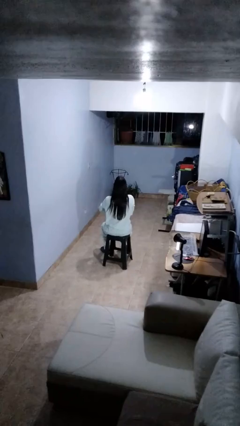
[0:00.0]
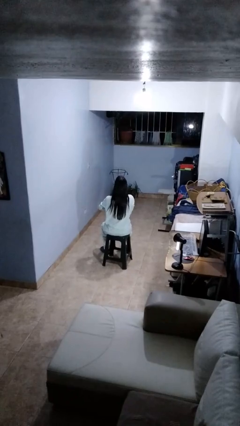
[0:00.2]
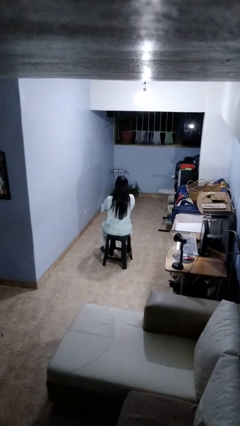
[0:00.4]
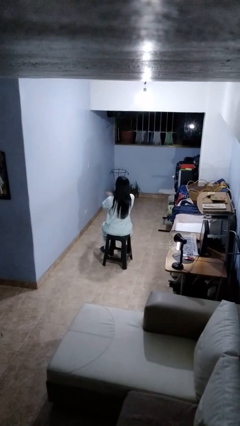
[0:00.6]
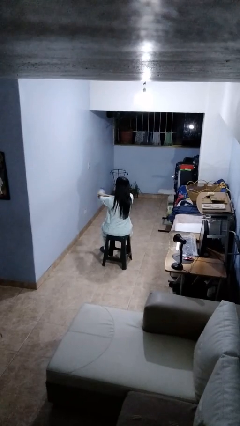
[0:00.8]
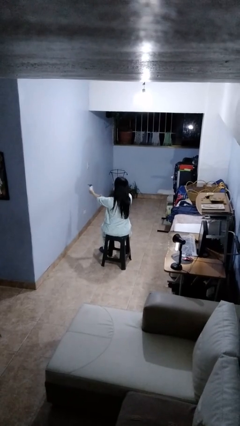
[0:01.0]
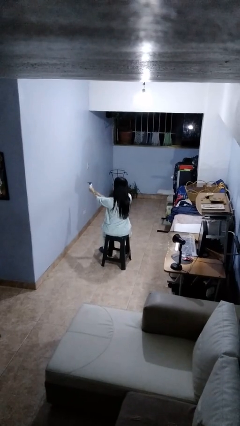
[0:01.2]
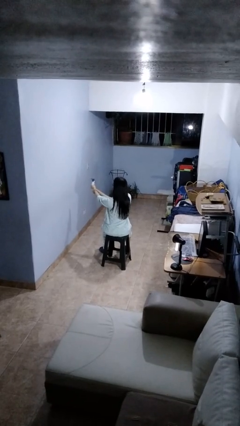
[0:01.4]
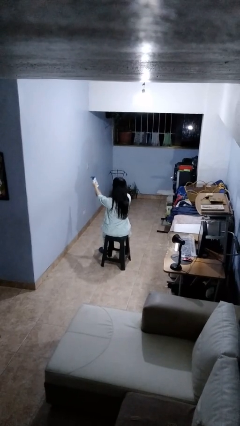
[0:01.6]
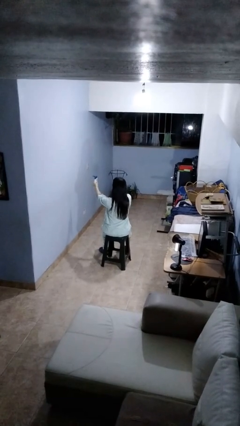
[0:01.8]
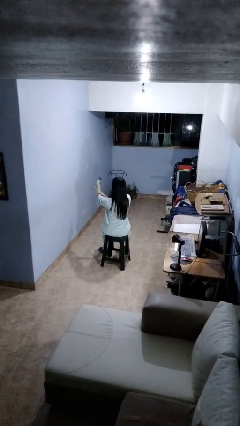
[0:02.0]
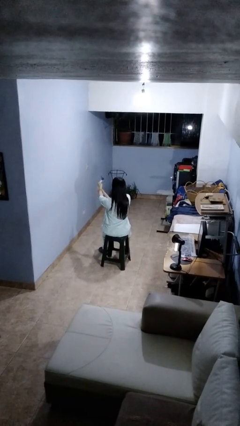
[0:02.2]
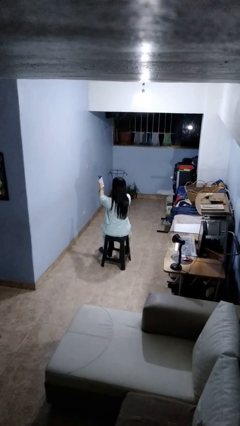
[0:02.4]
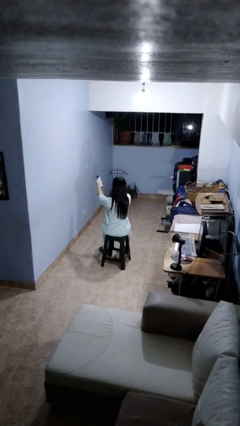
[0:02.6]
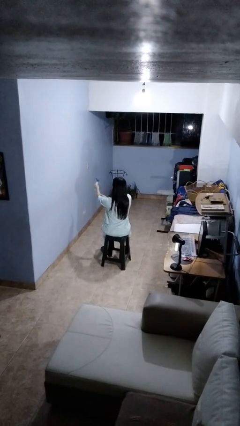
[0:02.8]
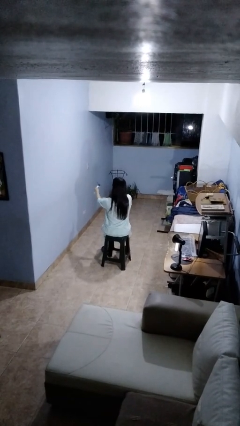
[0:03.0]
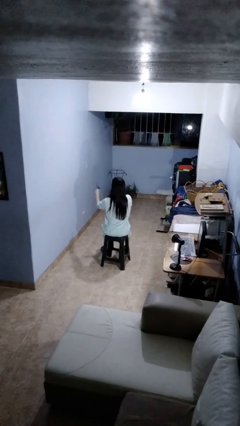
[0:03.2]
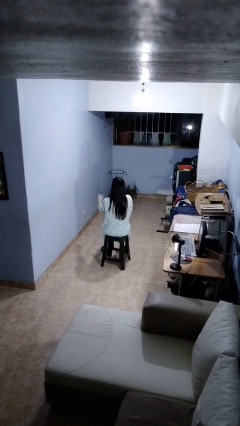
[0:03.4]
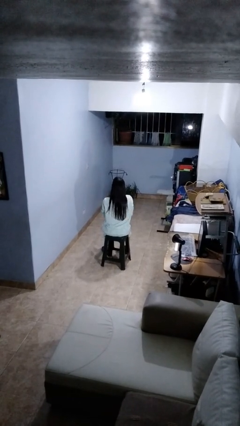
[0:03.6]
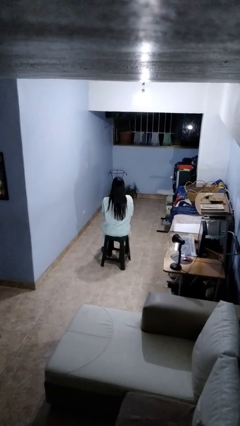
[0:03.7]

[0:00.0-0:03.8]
person applies sunscreen

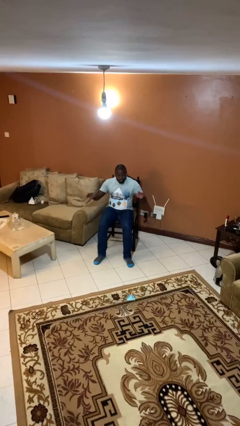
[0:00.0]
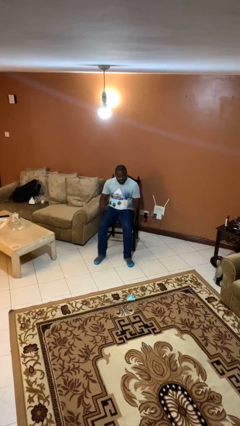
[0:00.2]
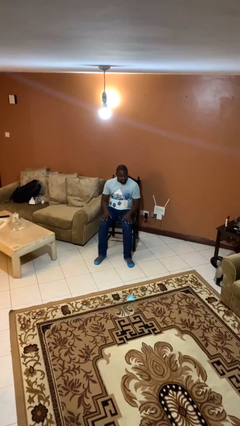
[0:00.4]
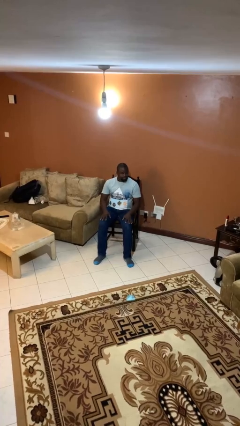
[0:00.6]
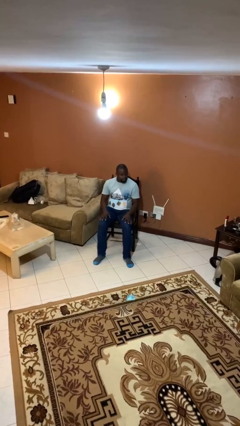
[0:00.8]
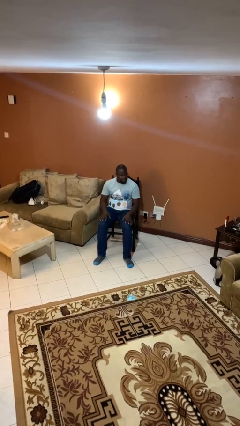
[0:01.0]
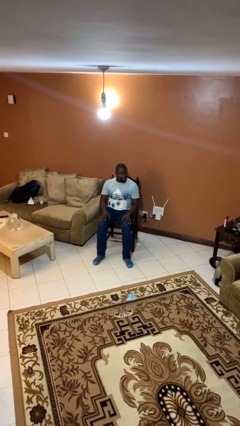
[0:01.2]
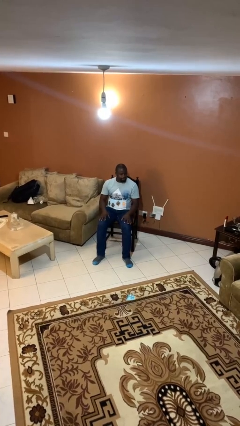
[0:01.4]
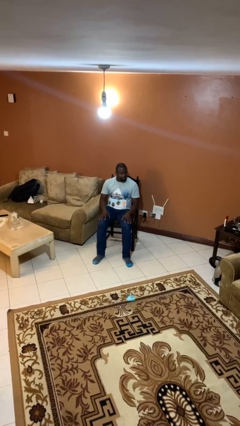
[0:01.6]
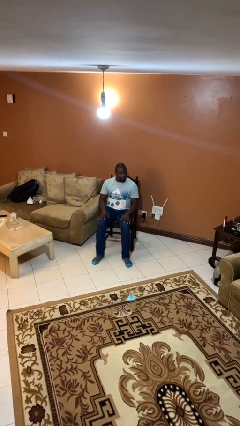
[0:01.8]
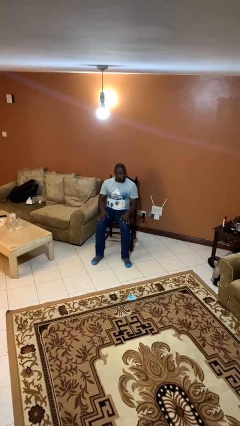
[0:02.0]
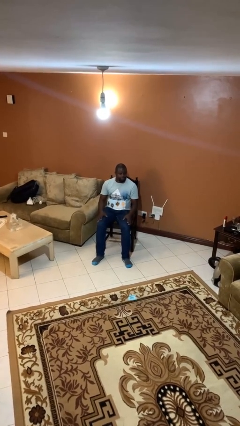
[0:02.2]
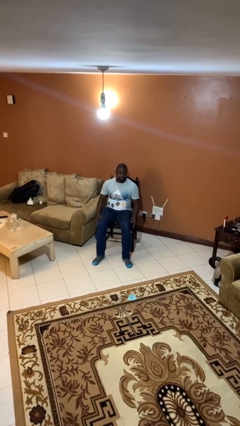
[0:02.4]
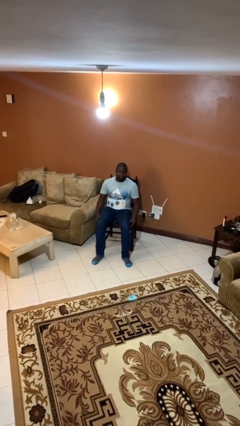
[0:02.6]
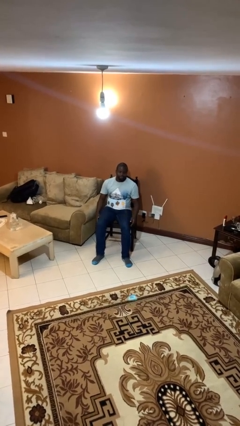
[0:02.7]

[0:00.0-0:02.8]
person slaps hands on thighs

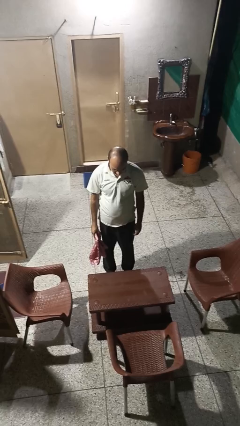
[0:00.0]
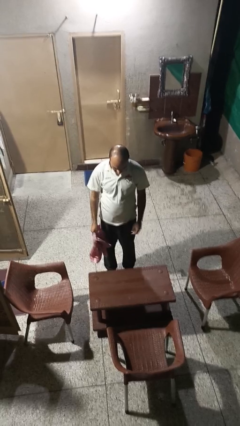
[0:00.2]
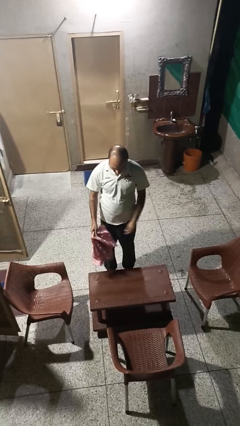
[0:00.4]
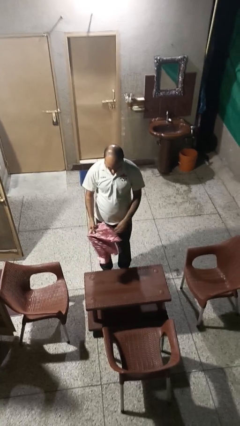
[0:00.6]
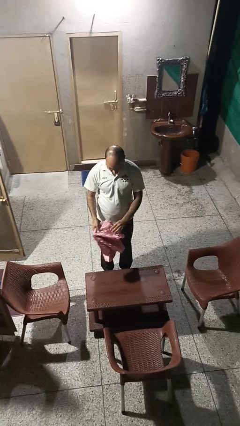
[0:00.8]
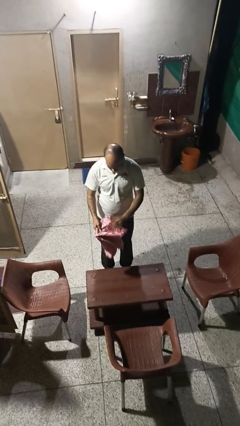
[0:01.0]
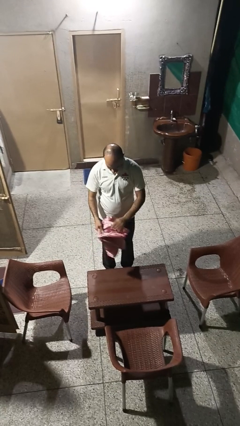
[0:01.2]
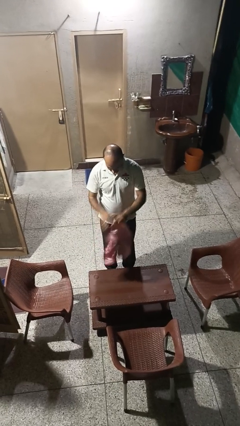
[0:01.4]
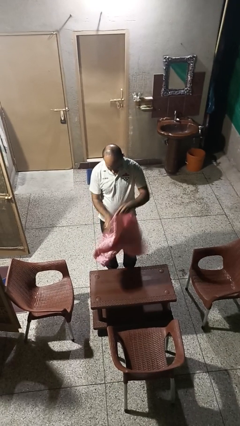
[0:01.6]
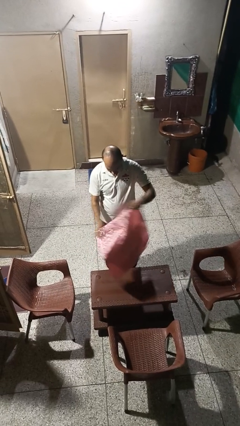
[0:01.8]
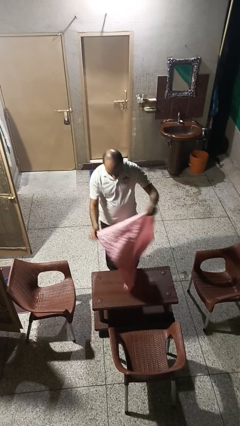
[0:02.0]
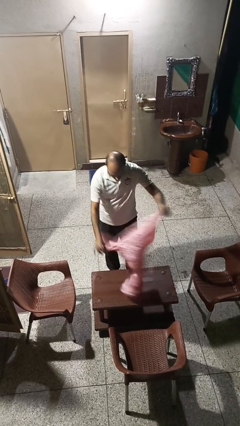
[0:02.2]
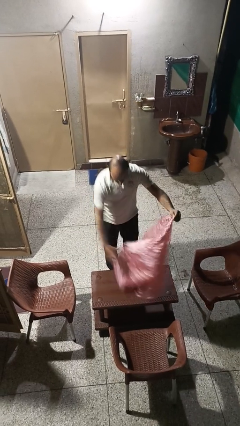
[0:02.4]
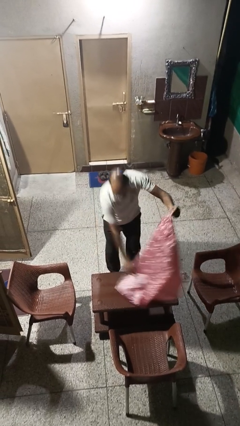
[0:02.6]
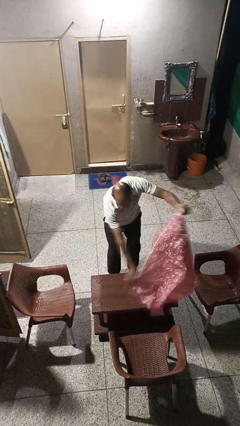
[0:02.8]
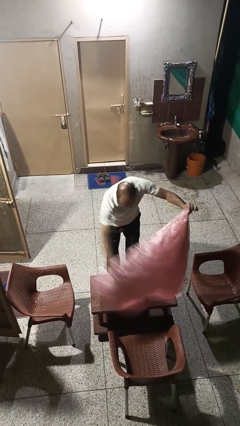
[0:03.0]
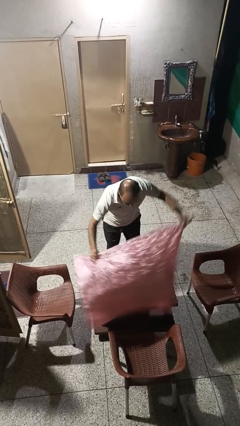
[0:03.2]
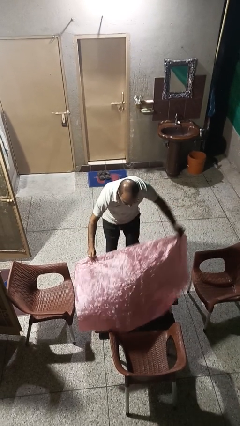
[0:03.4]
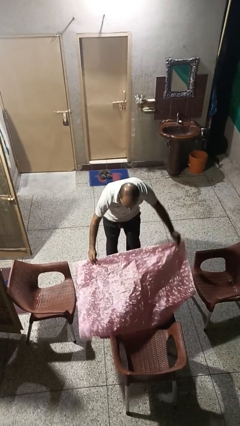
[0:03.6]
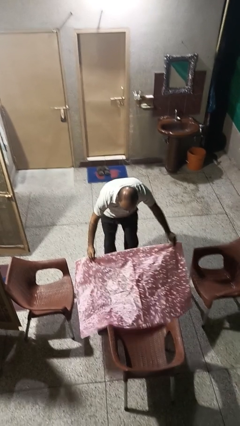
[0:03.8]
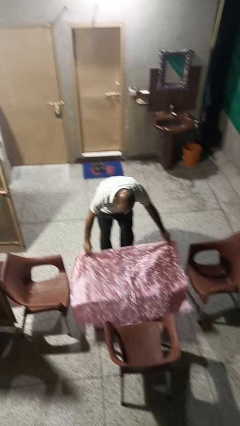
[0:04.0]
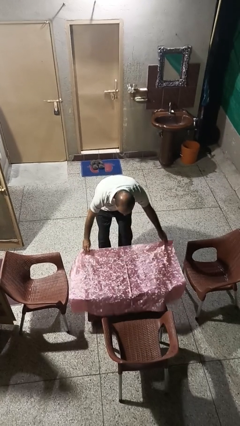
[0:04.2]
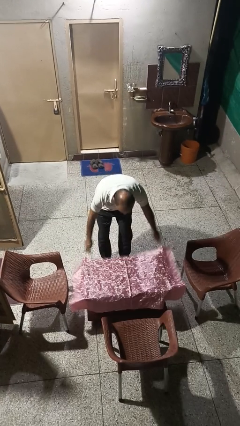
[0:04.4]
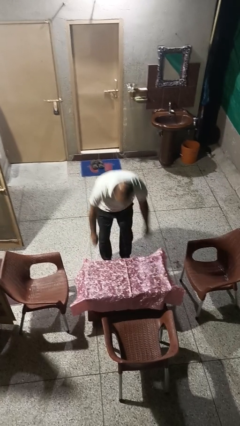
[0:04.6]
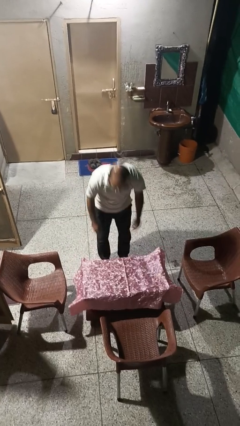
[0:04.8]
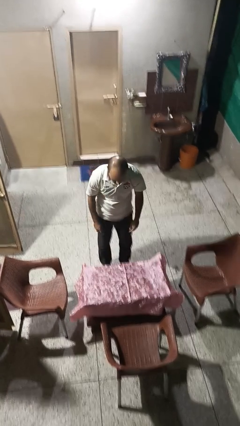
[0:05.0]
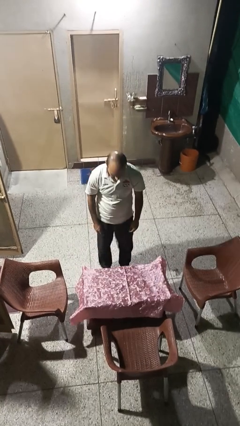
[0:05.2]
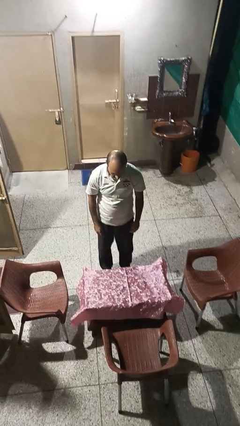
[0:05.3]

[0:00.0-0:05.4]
person spreads tablecloth

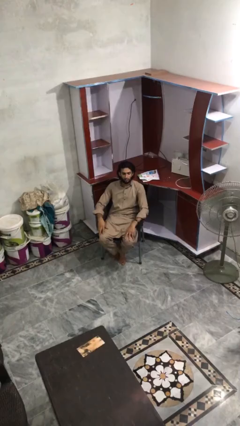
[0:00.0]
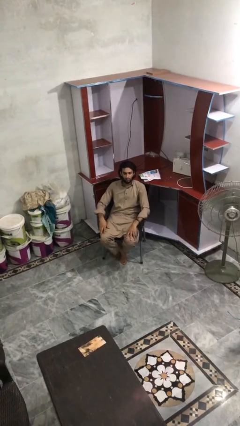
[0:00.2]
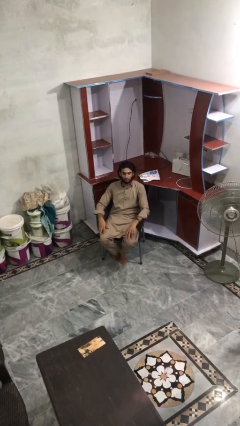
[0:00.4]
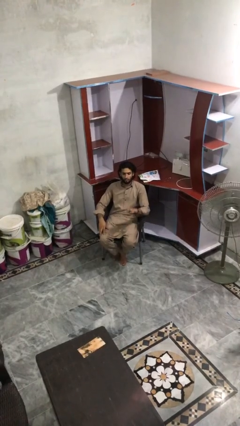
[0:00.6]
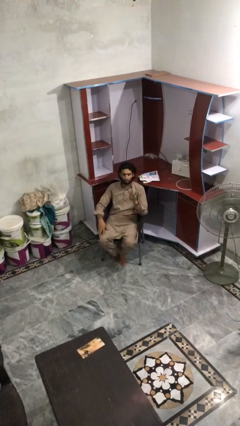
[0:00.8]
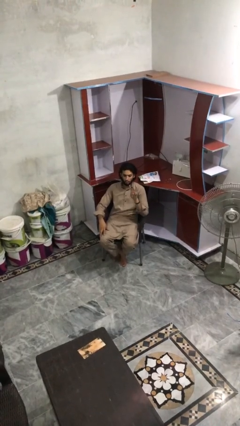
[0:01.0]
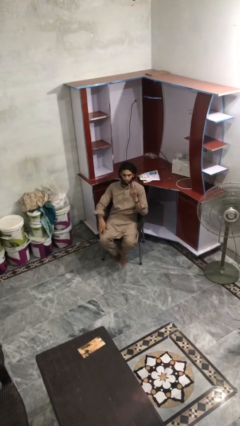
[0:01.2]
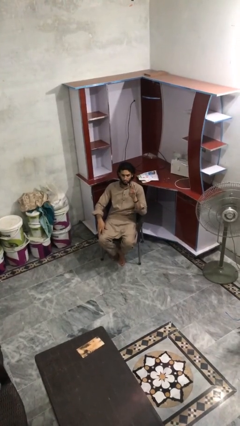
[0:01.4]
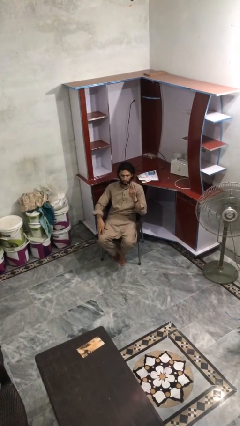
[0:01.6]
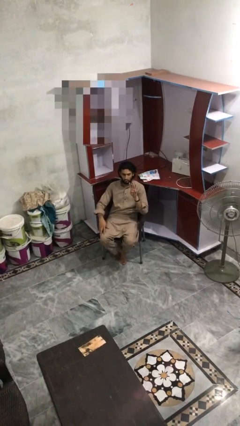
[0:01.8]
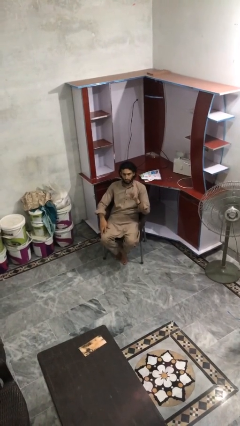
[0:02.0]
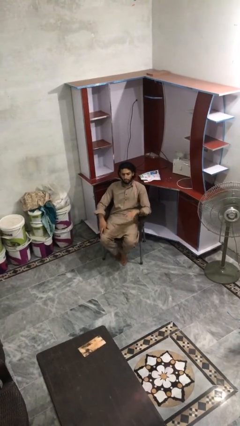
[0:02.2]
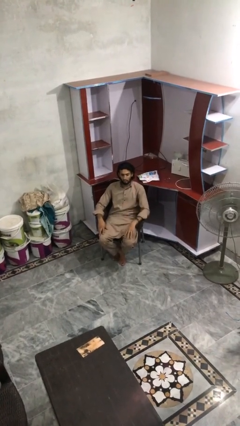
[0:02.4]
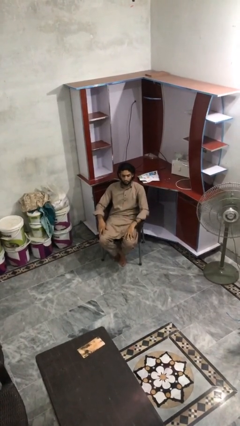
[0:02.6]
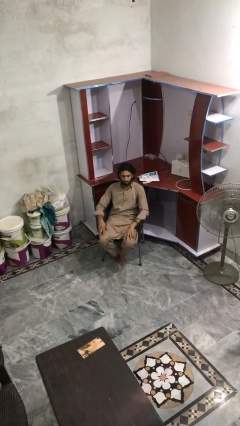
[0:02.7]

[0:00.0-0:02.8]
person gestures number three

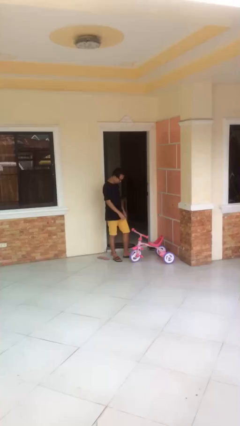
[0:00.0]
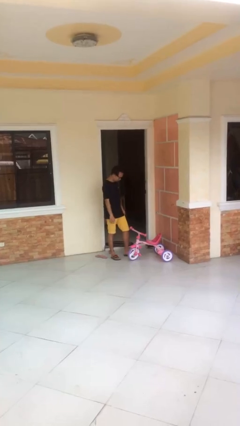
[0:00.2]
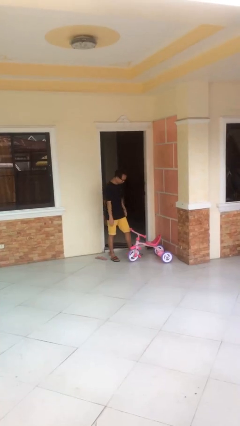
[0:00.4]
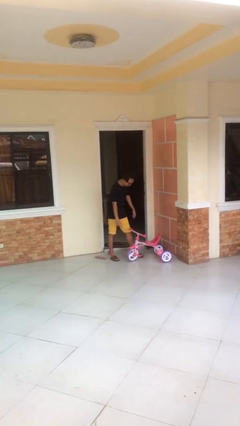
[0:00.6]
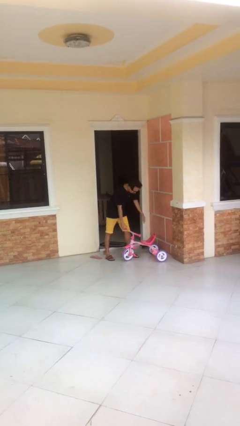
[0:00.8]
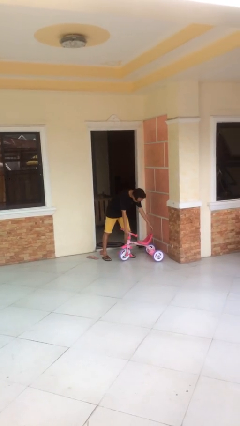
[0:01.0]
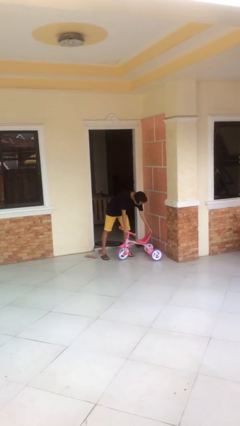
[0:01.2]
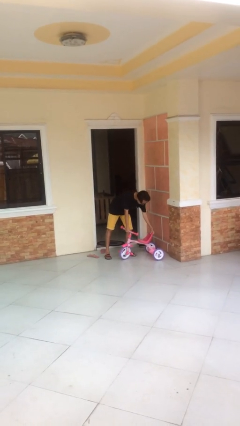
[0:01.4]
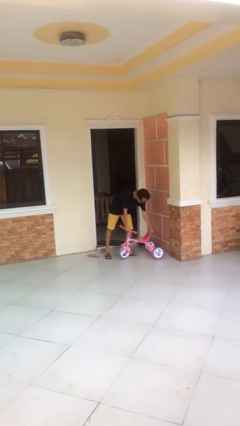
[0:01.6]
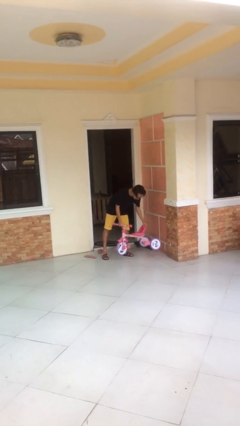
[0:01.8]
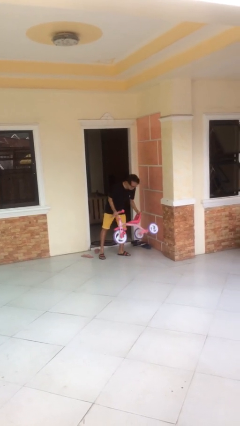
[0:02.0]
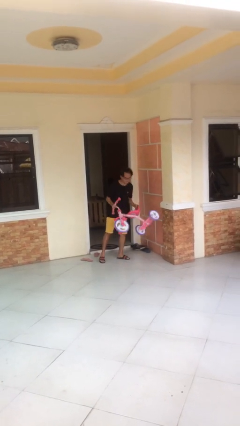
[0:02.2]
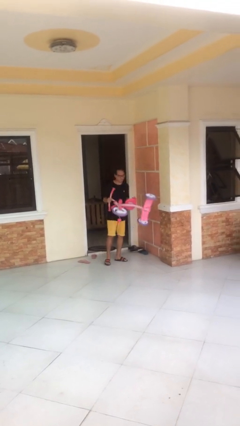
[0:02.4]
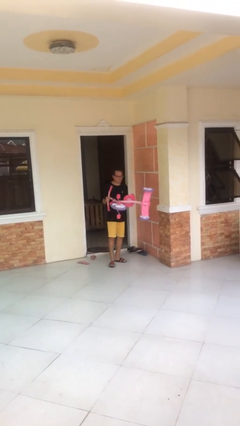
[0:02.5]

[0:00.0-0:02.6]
person picks up object from floor

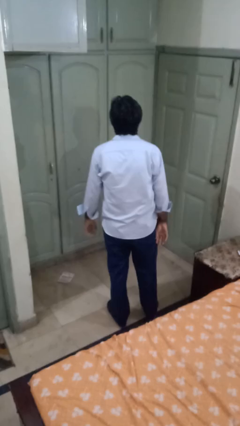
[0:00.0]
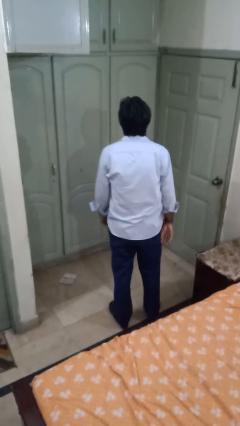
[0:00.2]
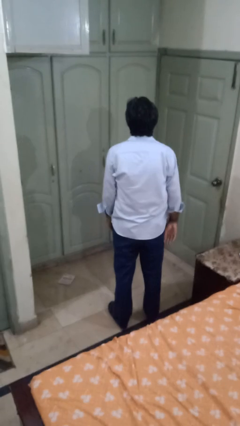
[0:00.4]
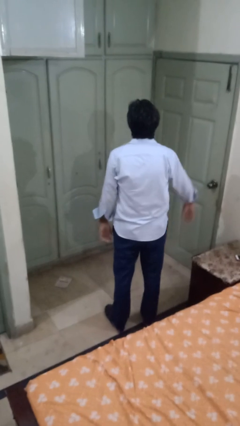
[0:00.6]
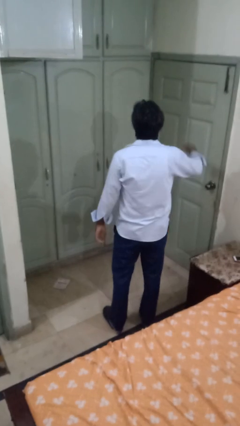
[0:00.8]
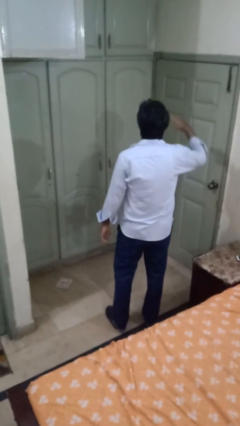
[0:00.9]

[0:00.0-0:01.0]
person salutes
